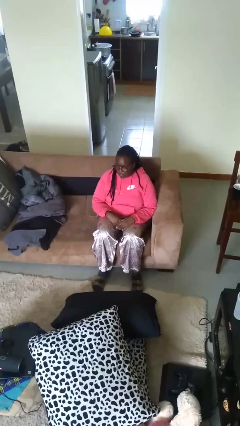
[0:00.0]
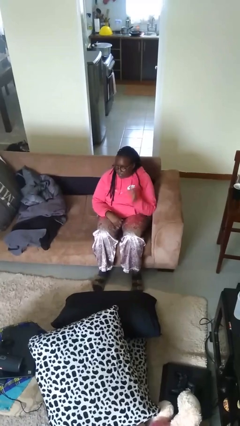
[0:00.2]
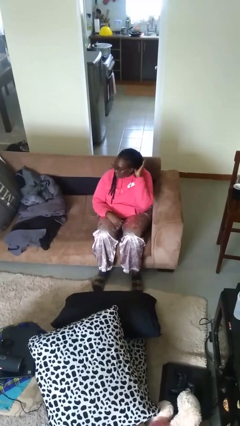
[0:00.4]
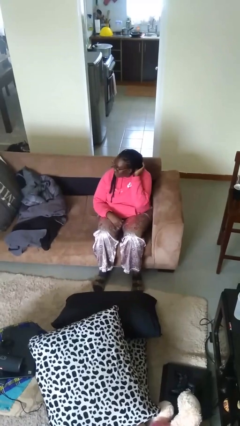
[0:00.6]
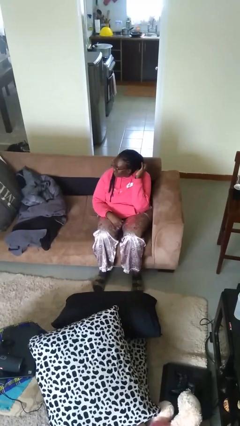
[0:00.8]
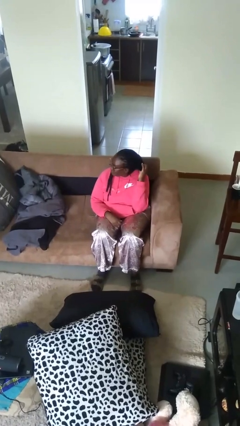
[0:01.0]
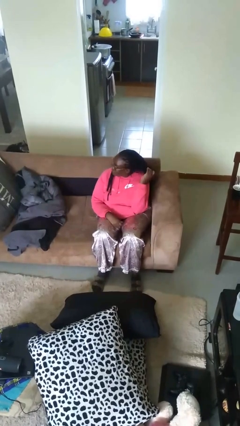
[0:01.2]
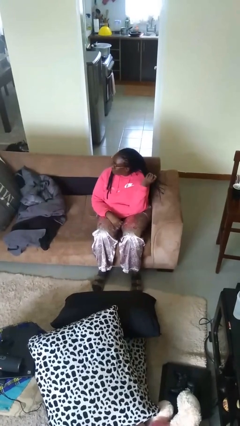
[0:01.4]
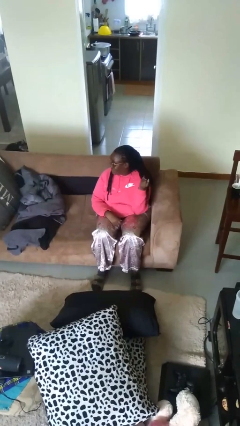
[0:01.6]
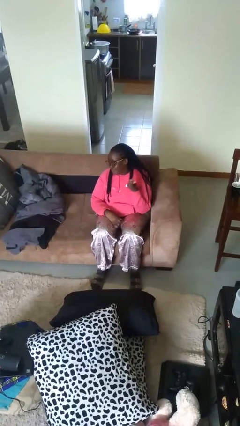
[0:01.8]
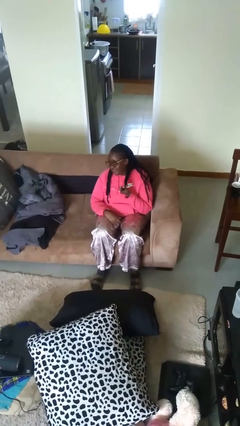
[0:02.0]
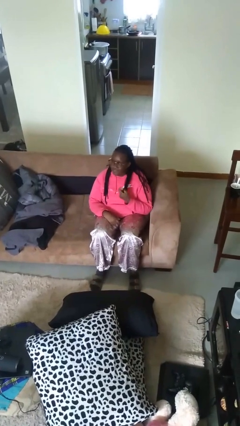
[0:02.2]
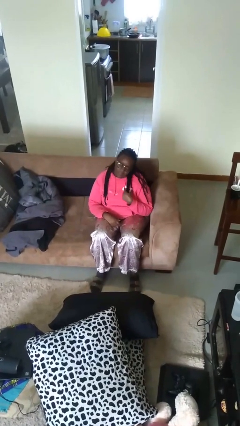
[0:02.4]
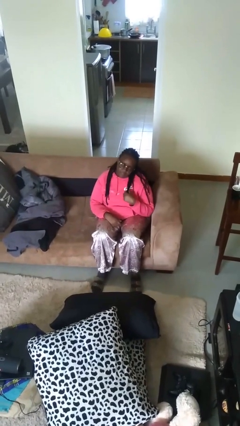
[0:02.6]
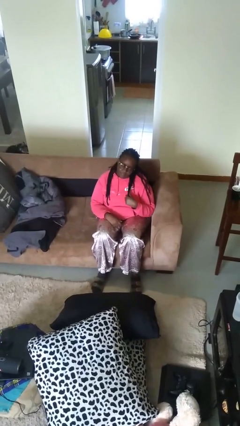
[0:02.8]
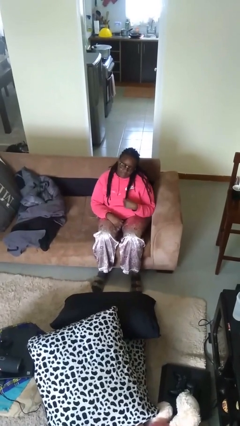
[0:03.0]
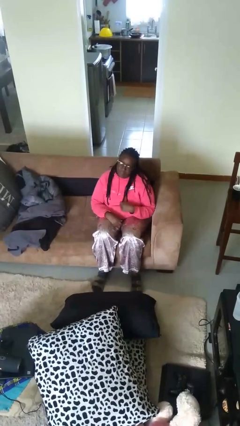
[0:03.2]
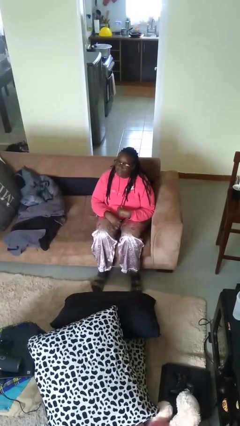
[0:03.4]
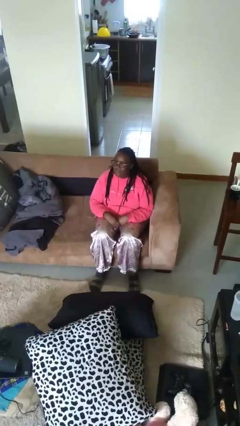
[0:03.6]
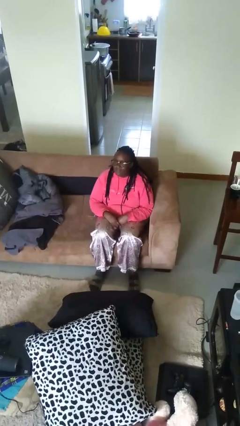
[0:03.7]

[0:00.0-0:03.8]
person strokes hair

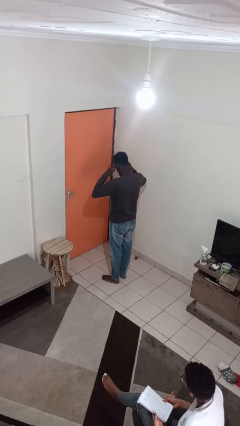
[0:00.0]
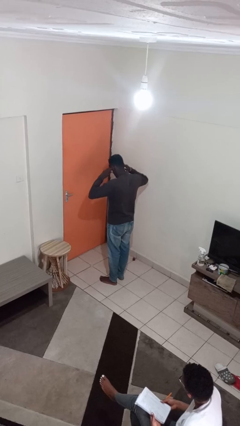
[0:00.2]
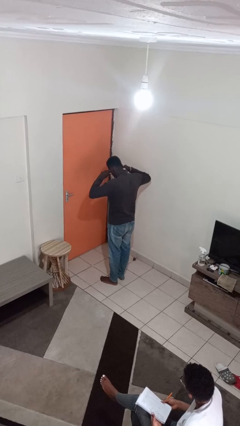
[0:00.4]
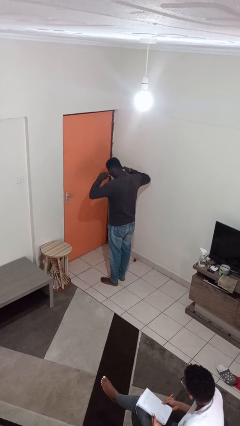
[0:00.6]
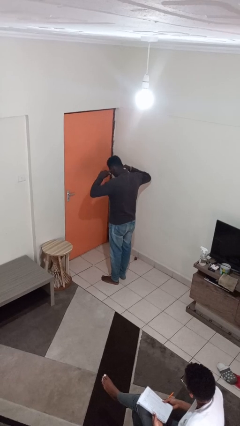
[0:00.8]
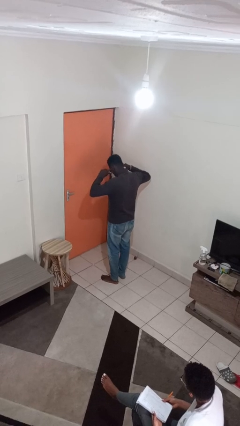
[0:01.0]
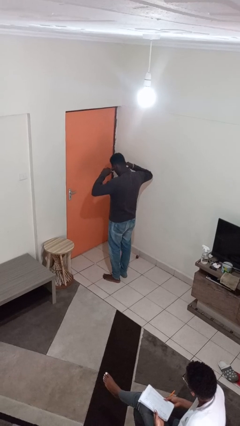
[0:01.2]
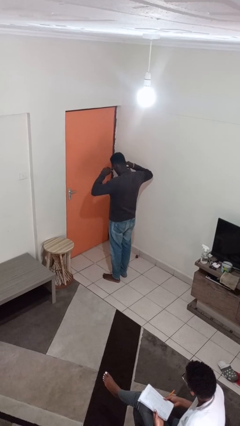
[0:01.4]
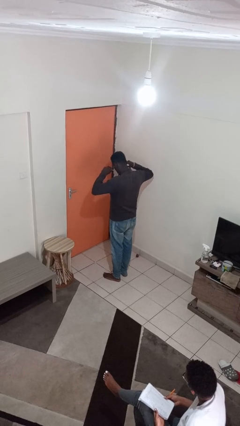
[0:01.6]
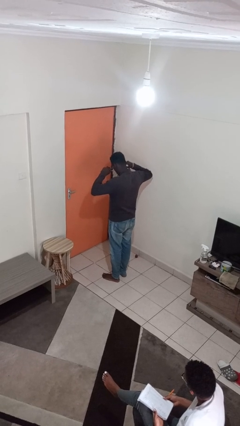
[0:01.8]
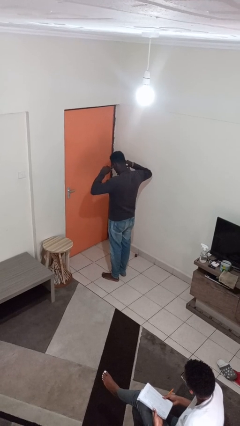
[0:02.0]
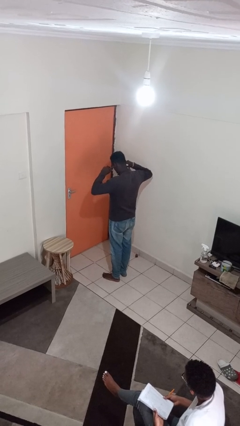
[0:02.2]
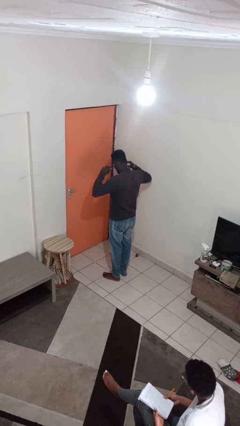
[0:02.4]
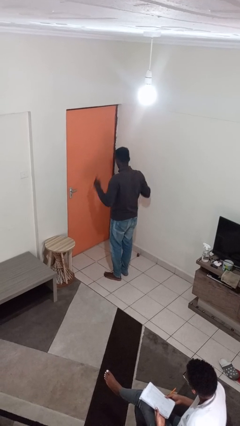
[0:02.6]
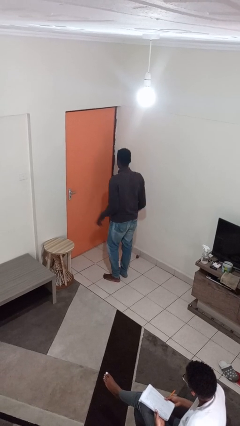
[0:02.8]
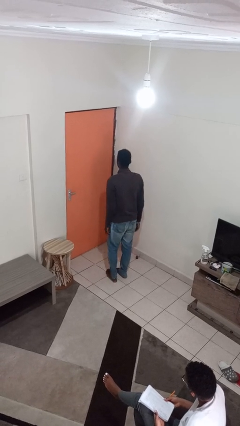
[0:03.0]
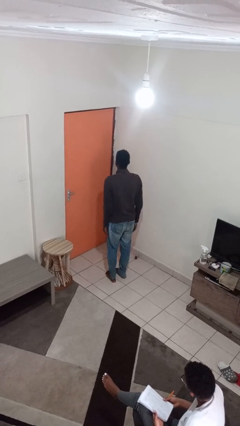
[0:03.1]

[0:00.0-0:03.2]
person puts fingers in ear

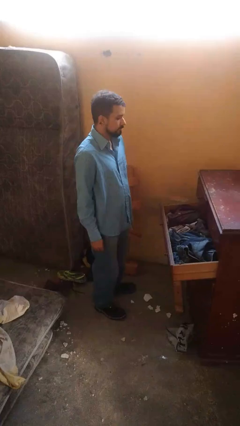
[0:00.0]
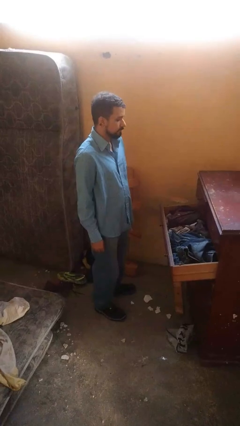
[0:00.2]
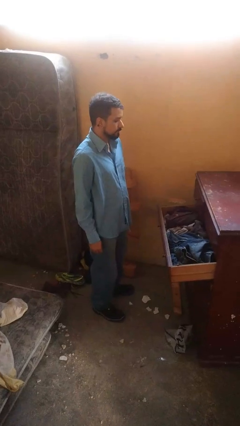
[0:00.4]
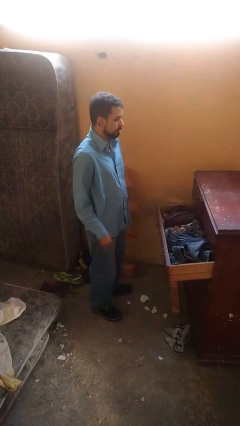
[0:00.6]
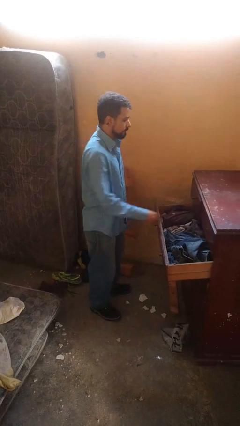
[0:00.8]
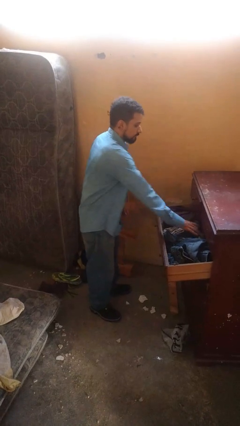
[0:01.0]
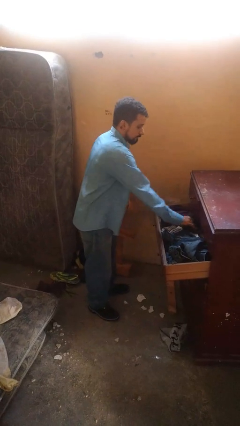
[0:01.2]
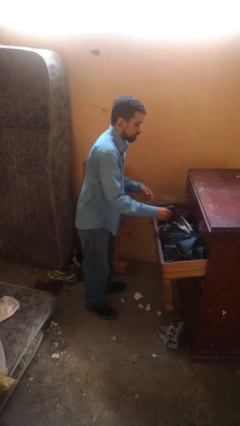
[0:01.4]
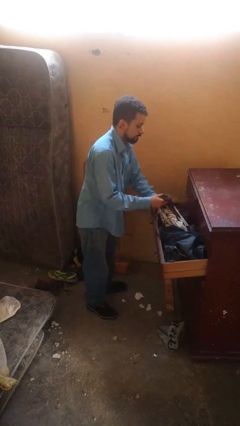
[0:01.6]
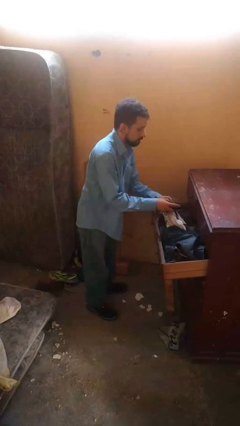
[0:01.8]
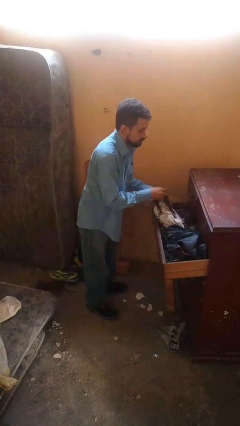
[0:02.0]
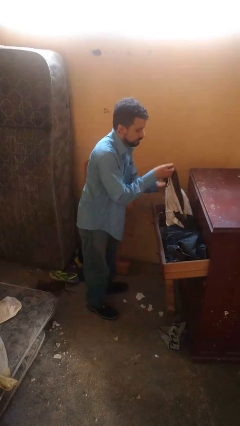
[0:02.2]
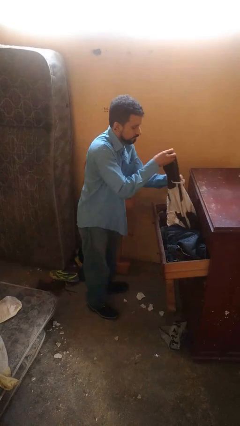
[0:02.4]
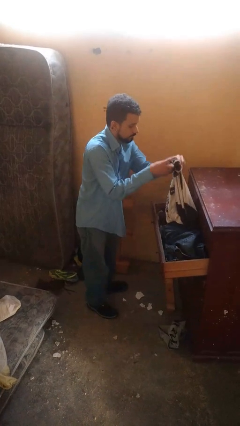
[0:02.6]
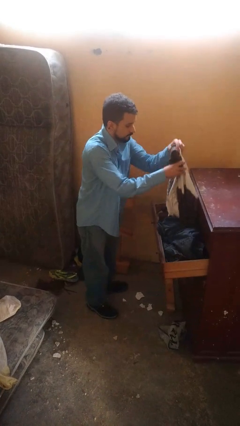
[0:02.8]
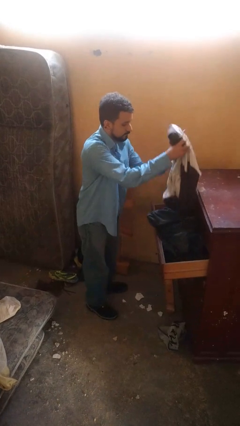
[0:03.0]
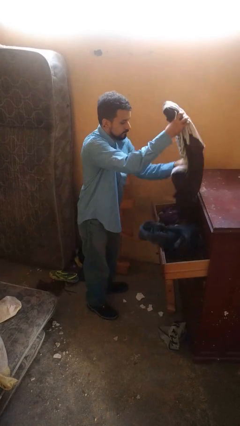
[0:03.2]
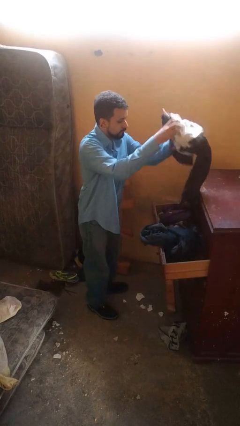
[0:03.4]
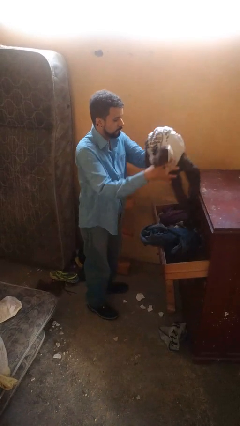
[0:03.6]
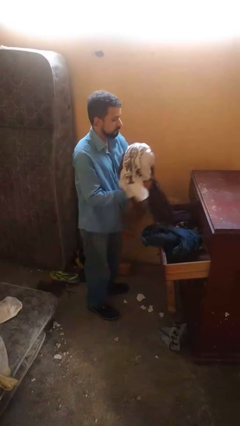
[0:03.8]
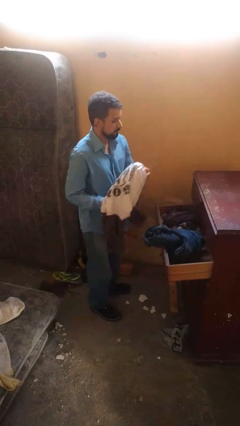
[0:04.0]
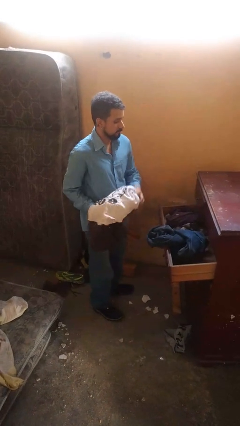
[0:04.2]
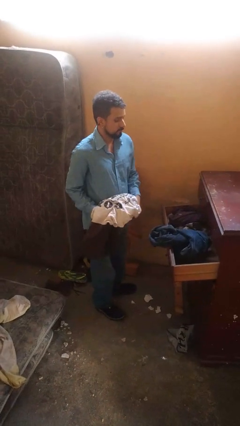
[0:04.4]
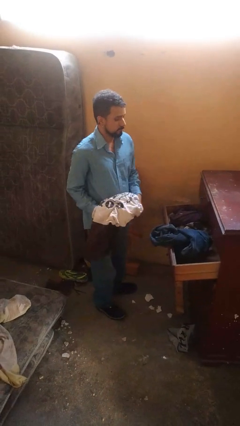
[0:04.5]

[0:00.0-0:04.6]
person takes clothes from dresser

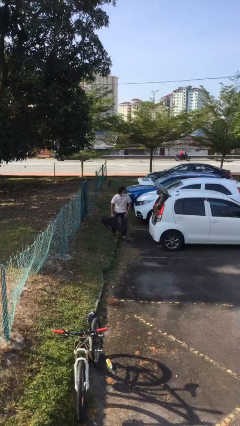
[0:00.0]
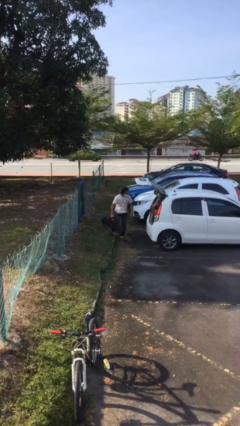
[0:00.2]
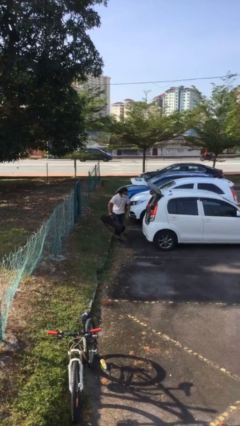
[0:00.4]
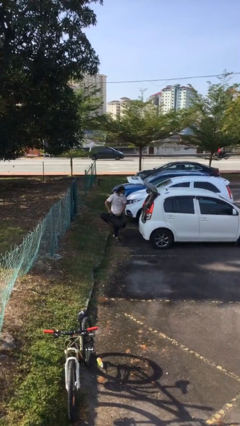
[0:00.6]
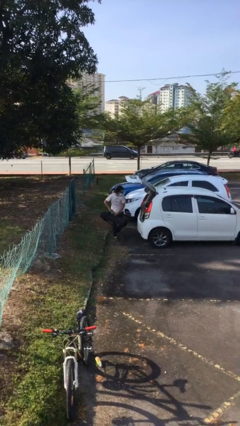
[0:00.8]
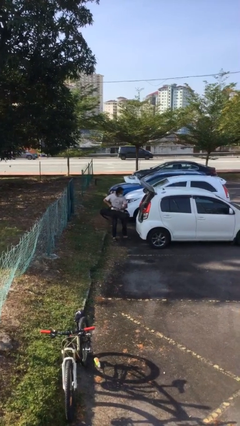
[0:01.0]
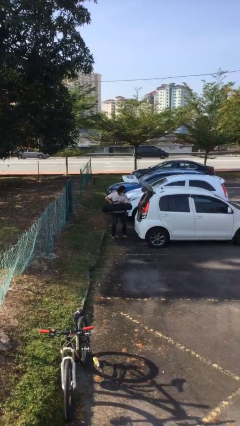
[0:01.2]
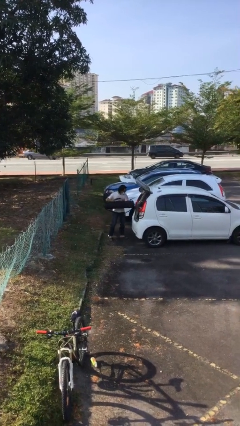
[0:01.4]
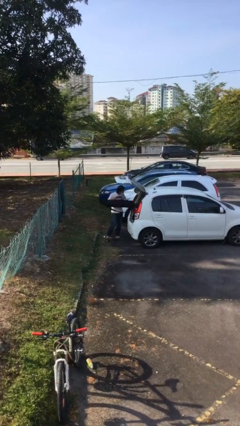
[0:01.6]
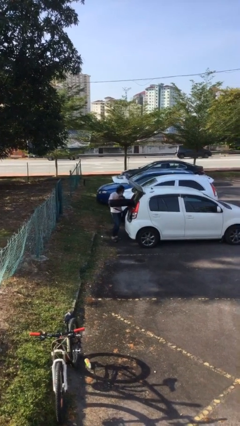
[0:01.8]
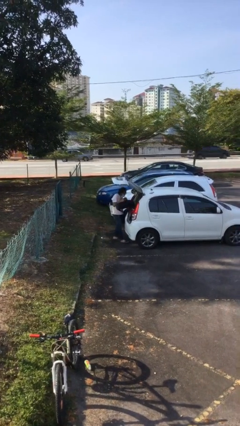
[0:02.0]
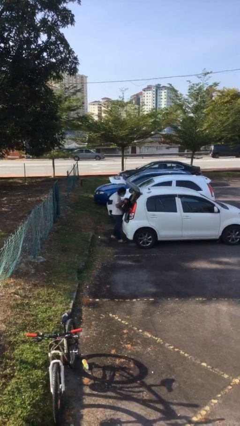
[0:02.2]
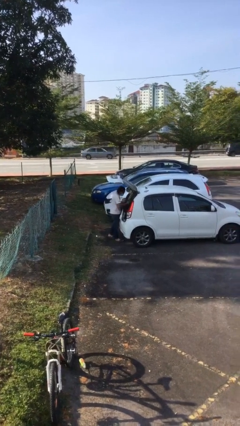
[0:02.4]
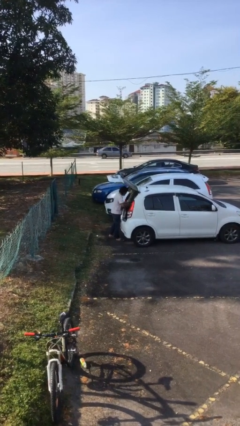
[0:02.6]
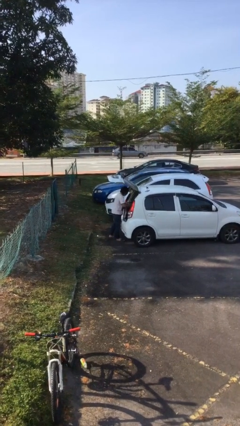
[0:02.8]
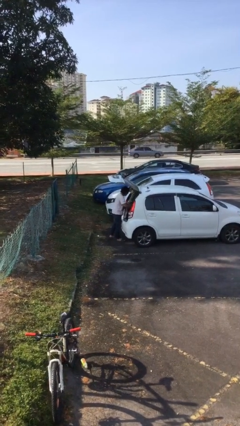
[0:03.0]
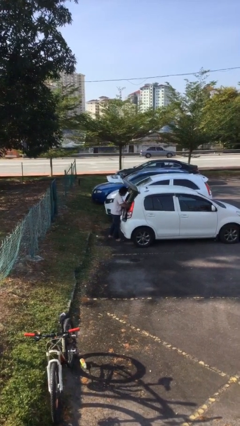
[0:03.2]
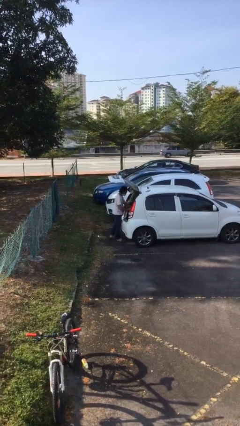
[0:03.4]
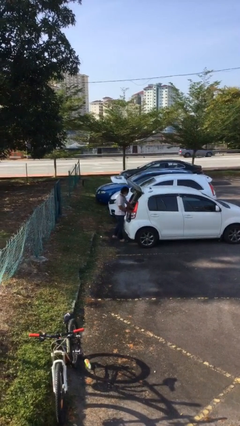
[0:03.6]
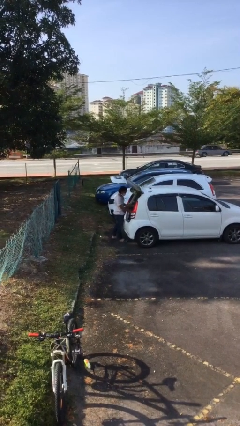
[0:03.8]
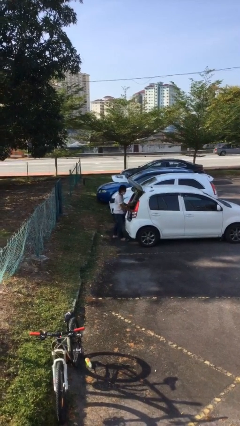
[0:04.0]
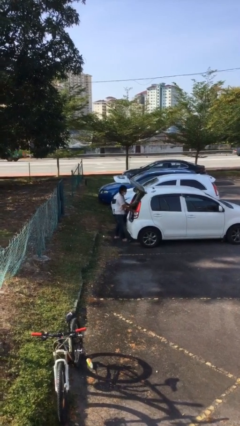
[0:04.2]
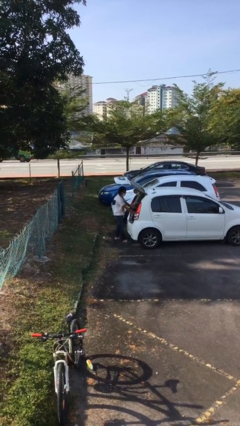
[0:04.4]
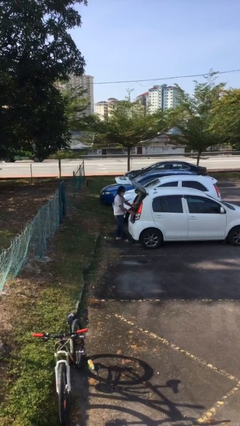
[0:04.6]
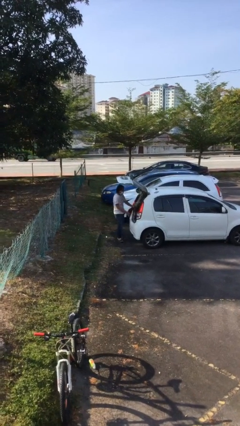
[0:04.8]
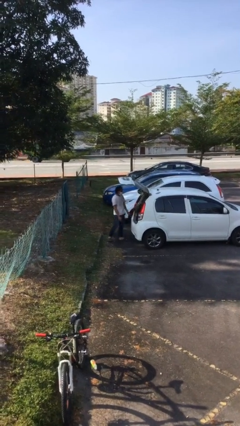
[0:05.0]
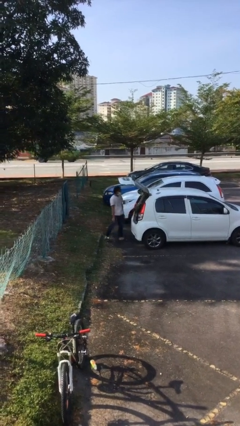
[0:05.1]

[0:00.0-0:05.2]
person loads car

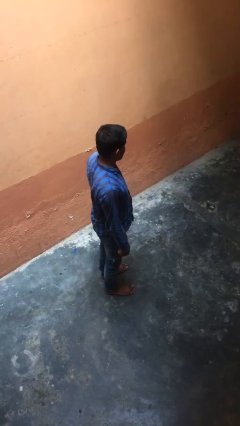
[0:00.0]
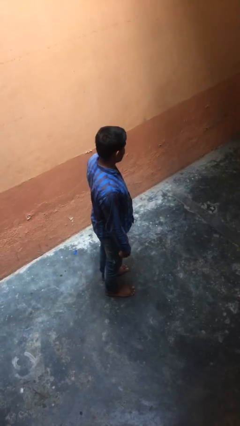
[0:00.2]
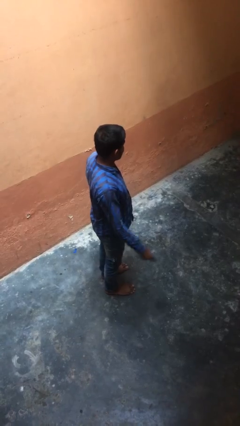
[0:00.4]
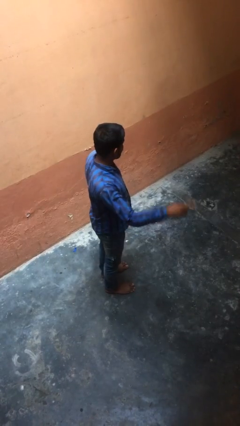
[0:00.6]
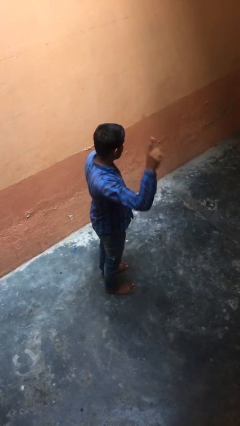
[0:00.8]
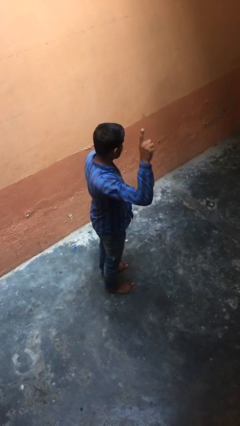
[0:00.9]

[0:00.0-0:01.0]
person gestures number one
